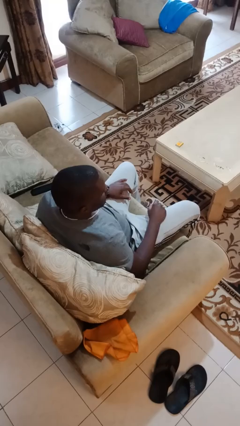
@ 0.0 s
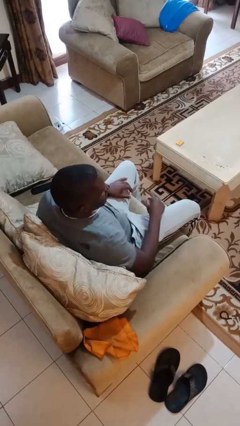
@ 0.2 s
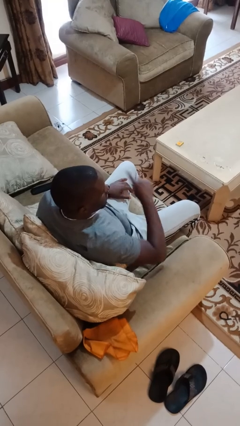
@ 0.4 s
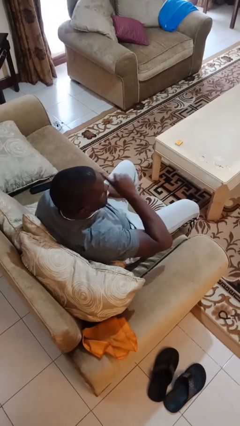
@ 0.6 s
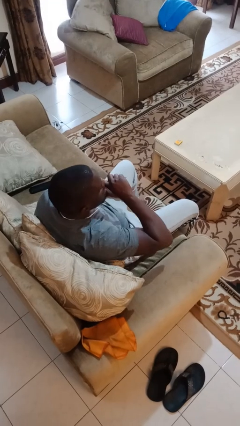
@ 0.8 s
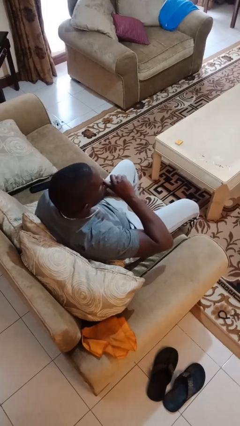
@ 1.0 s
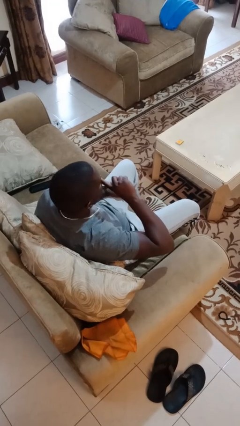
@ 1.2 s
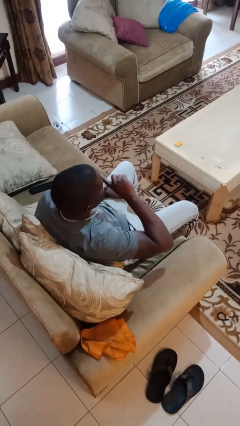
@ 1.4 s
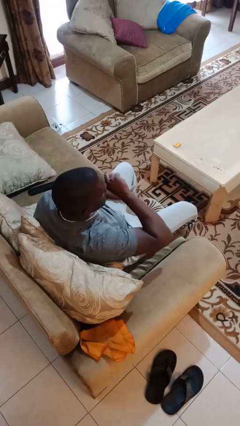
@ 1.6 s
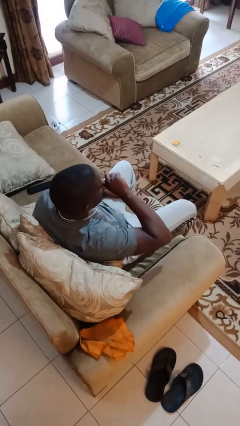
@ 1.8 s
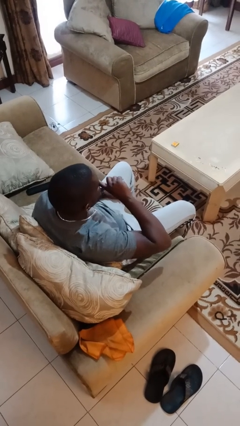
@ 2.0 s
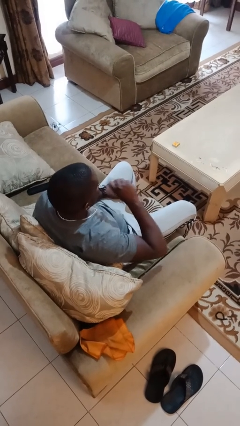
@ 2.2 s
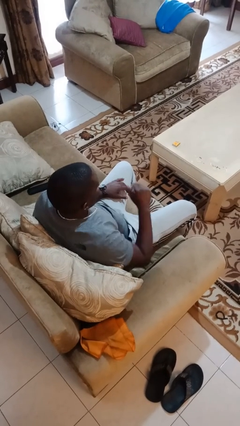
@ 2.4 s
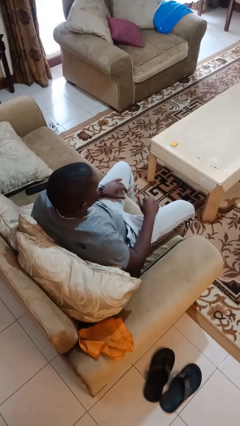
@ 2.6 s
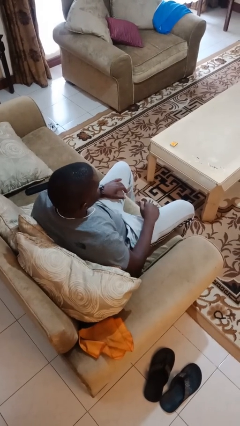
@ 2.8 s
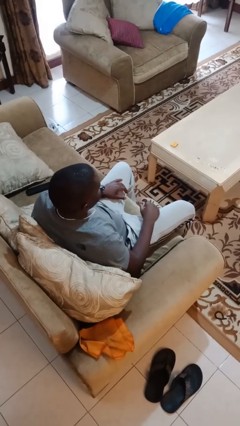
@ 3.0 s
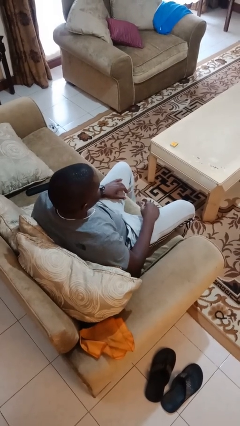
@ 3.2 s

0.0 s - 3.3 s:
person licks fingers

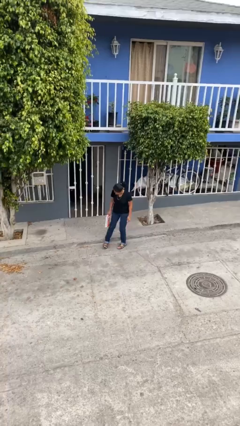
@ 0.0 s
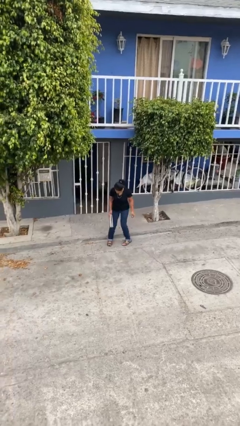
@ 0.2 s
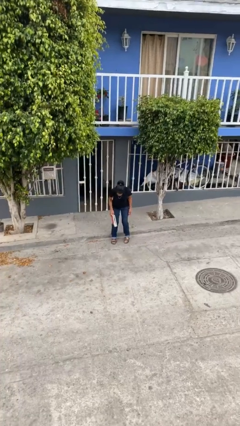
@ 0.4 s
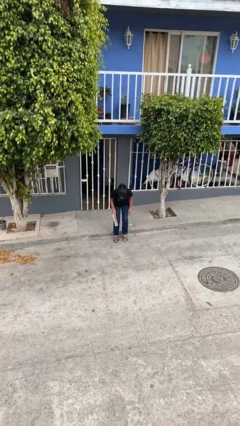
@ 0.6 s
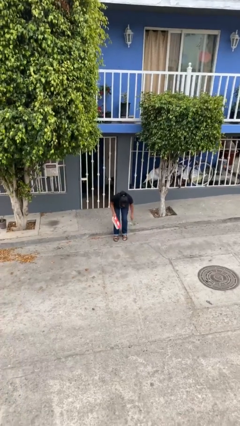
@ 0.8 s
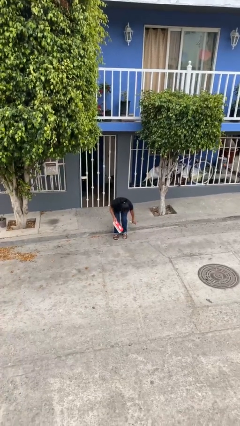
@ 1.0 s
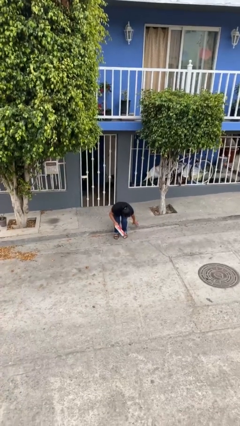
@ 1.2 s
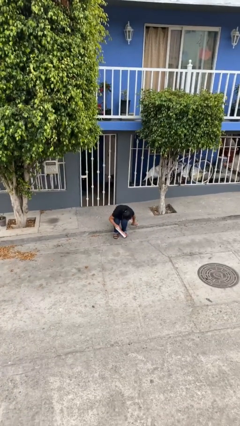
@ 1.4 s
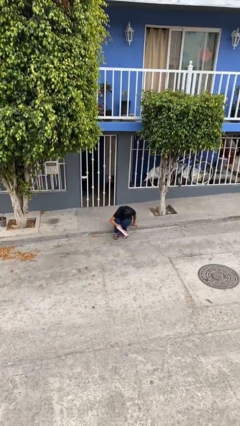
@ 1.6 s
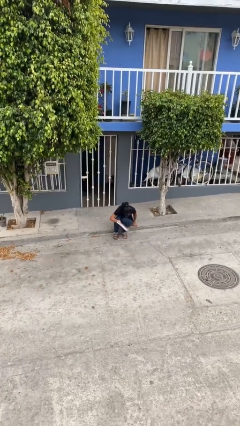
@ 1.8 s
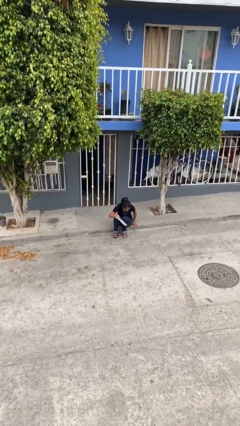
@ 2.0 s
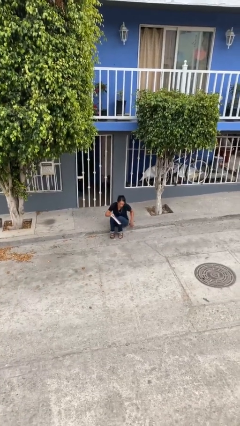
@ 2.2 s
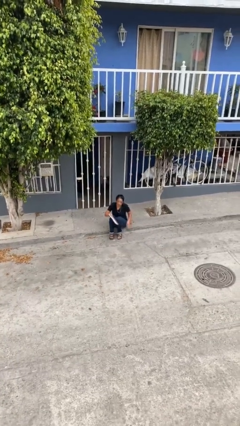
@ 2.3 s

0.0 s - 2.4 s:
person sits down

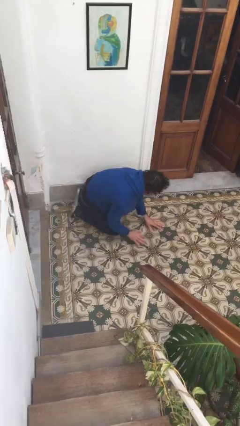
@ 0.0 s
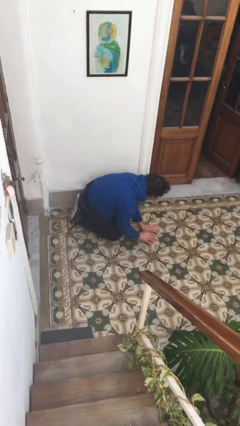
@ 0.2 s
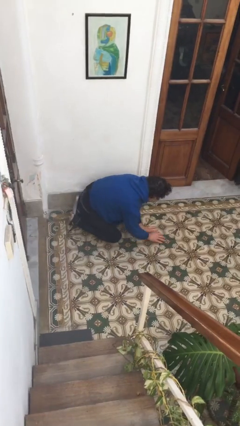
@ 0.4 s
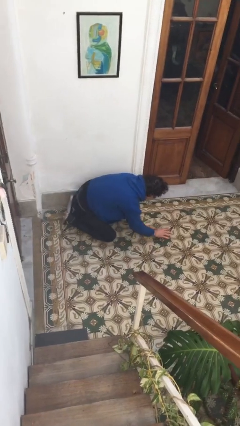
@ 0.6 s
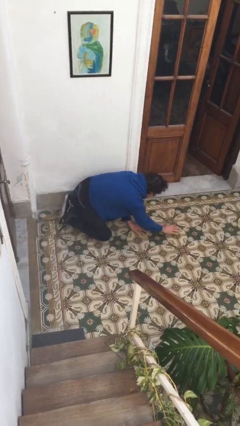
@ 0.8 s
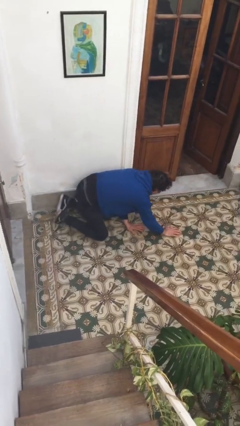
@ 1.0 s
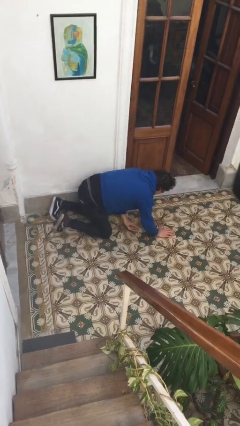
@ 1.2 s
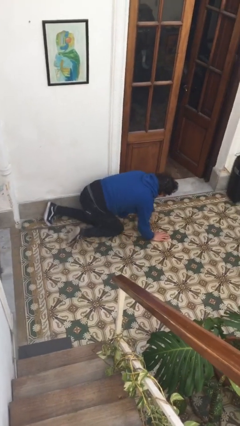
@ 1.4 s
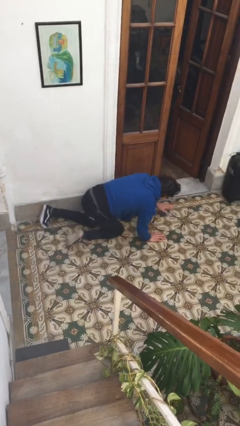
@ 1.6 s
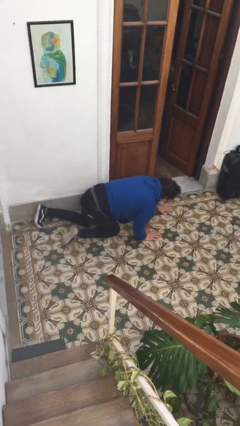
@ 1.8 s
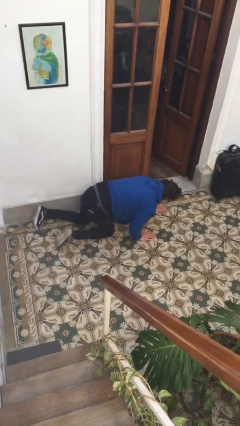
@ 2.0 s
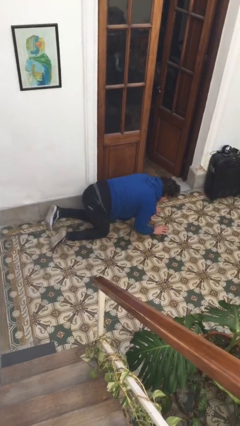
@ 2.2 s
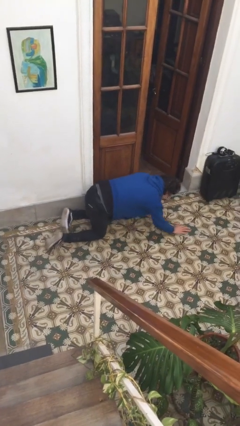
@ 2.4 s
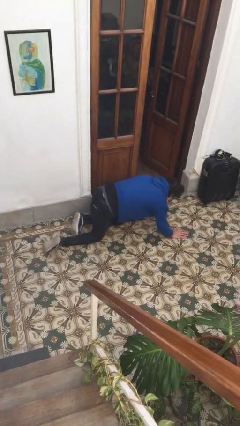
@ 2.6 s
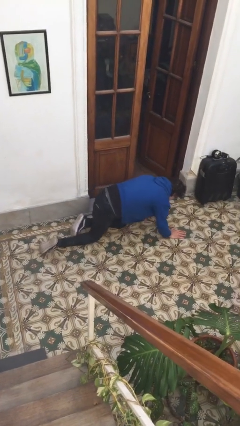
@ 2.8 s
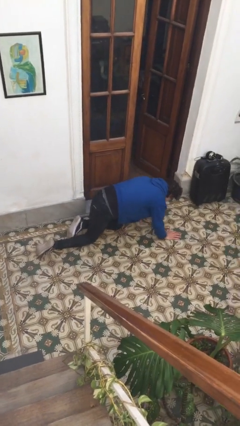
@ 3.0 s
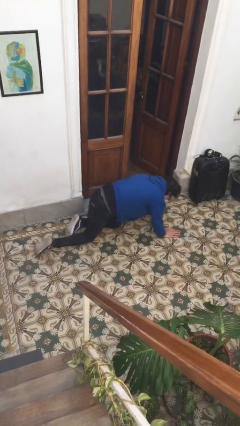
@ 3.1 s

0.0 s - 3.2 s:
person crawls

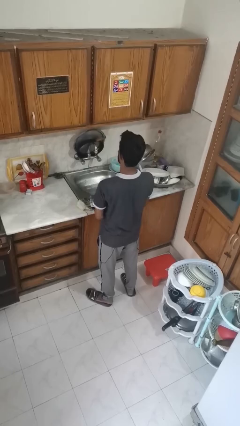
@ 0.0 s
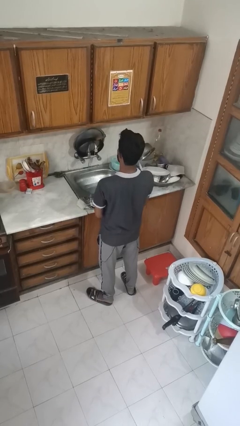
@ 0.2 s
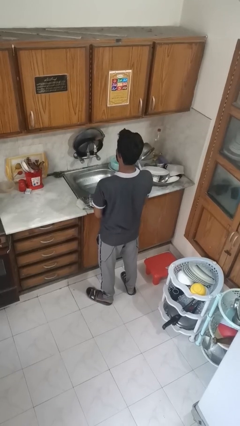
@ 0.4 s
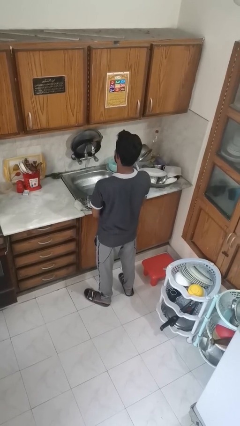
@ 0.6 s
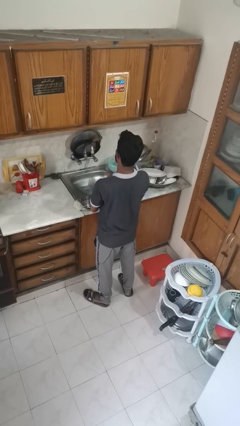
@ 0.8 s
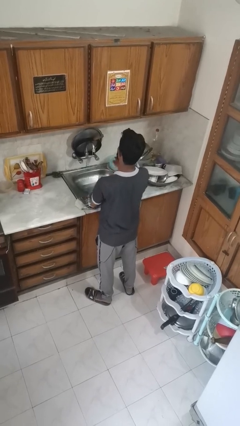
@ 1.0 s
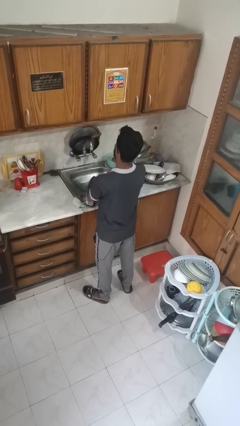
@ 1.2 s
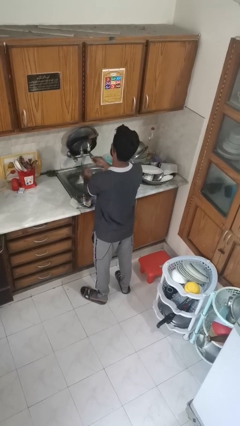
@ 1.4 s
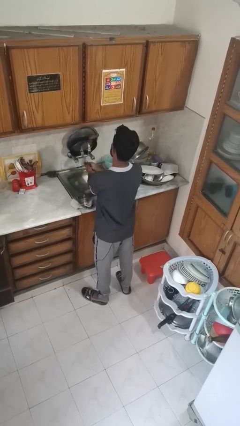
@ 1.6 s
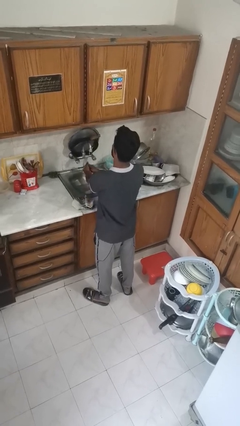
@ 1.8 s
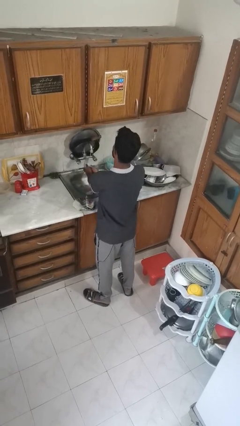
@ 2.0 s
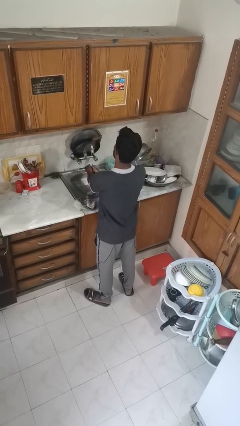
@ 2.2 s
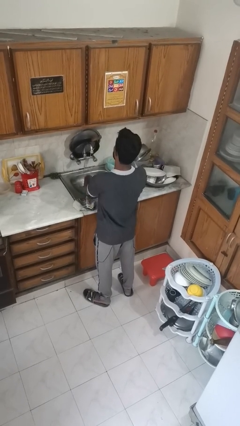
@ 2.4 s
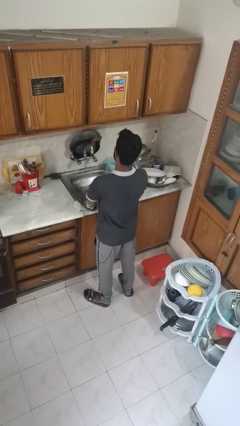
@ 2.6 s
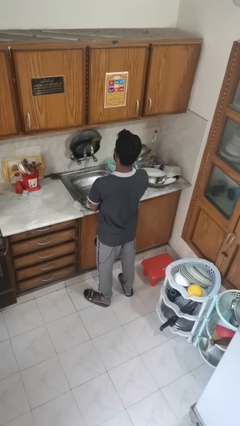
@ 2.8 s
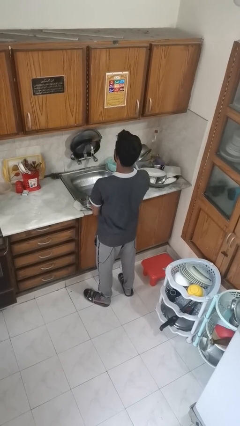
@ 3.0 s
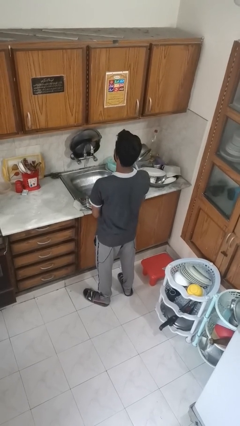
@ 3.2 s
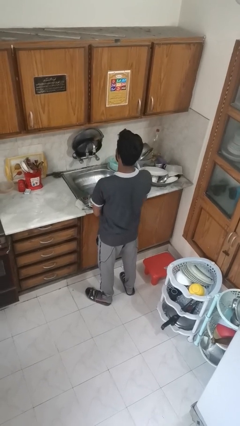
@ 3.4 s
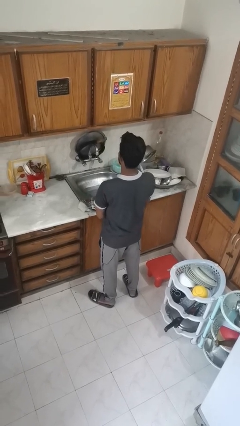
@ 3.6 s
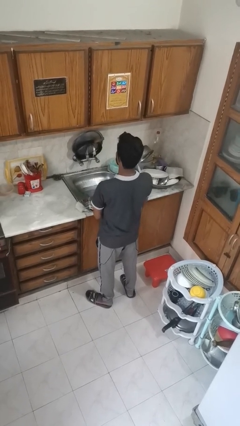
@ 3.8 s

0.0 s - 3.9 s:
person washes hands

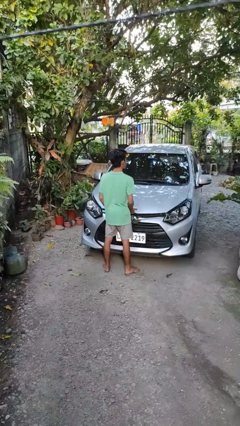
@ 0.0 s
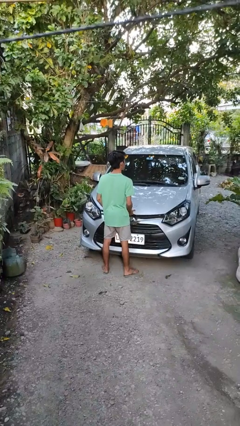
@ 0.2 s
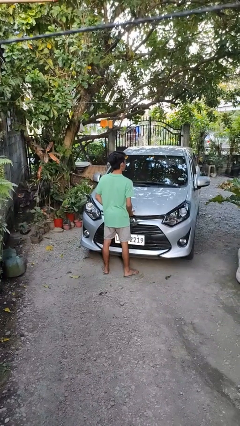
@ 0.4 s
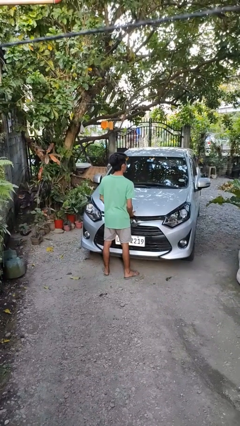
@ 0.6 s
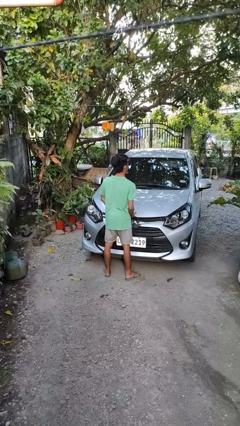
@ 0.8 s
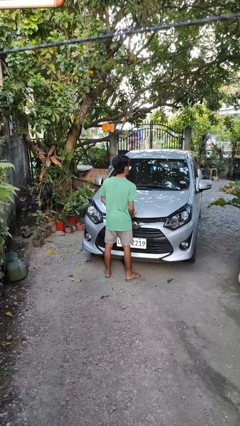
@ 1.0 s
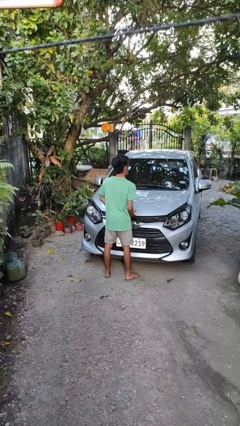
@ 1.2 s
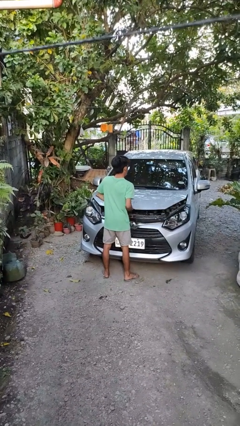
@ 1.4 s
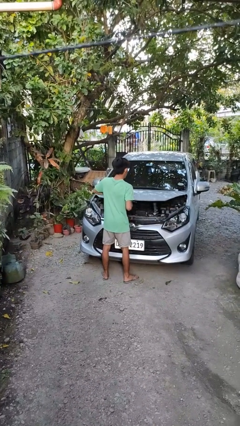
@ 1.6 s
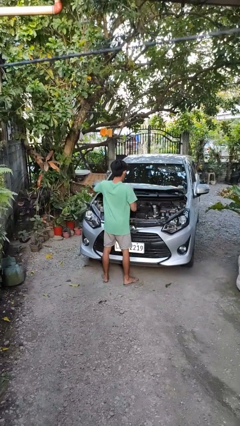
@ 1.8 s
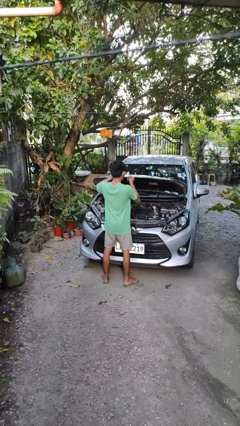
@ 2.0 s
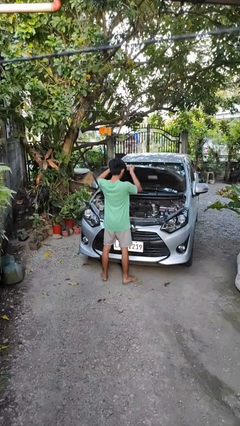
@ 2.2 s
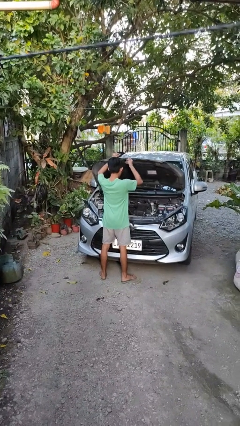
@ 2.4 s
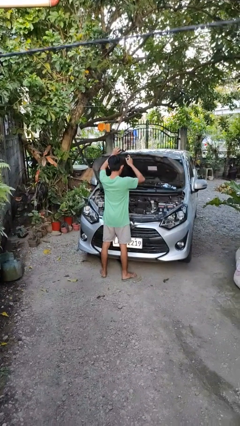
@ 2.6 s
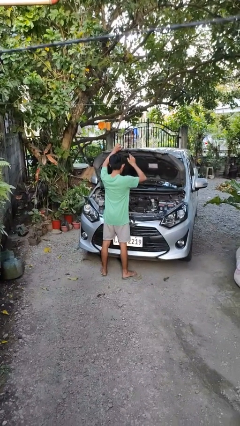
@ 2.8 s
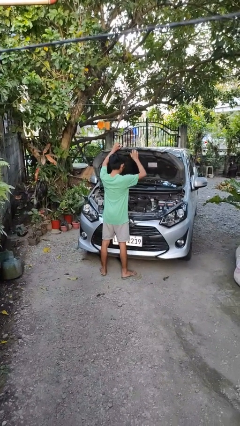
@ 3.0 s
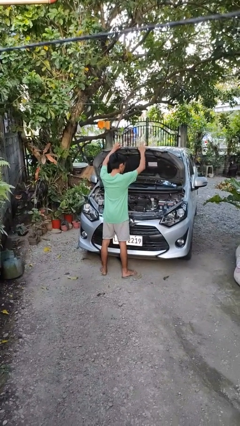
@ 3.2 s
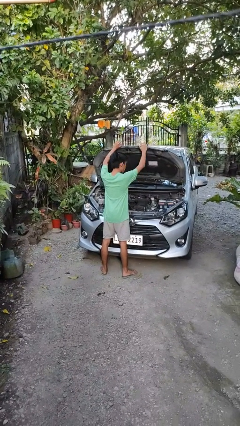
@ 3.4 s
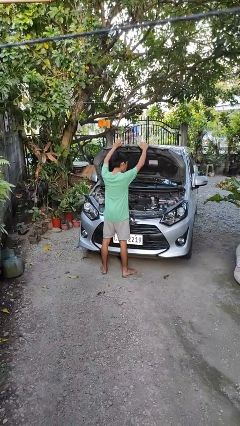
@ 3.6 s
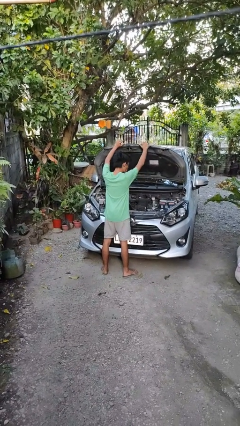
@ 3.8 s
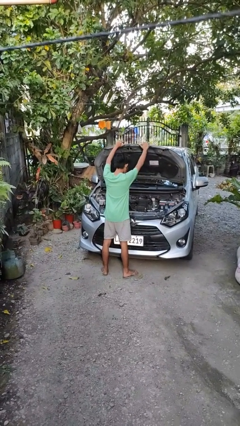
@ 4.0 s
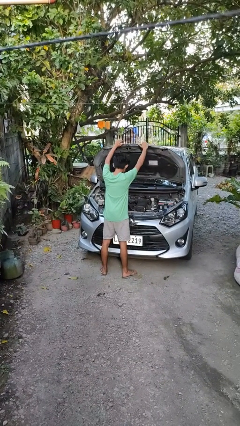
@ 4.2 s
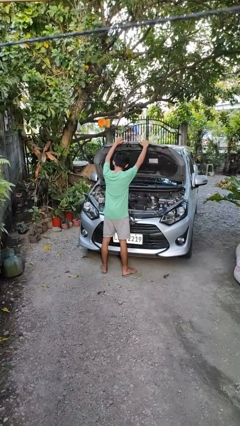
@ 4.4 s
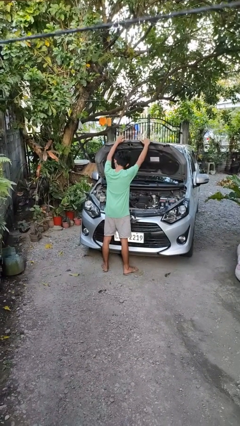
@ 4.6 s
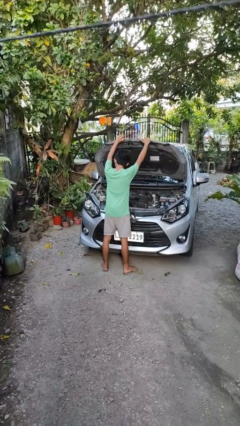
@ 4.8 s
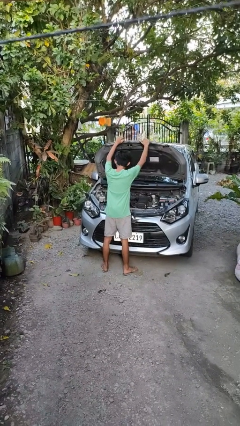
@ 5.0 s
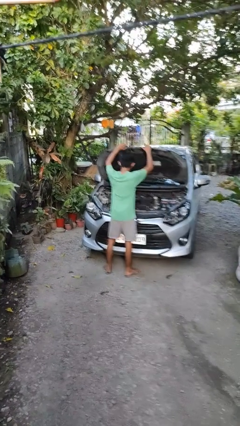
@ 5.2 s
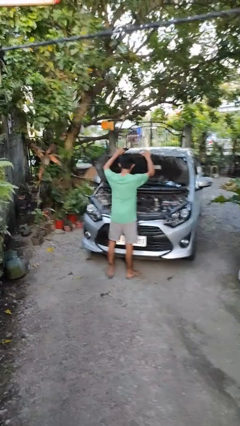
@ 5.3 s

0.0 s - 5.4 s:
person opens car hood
